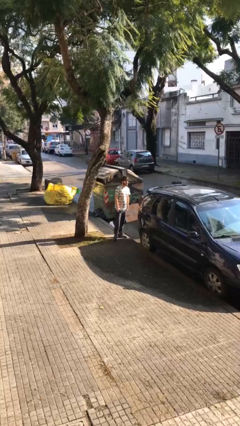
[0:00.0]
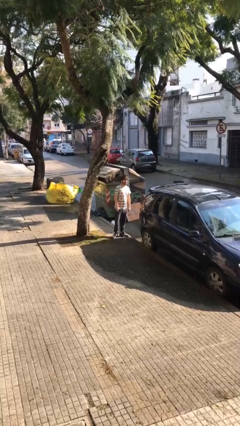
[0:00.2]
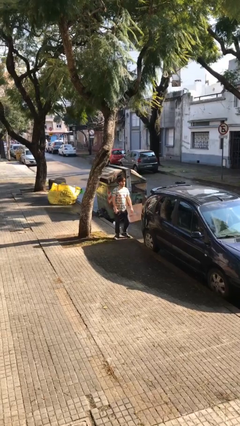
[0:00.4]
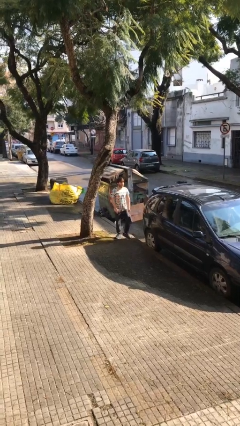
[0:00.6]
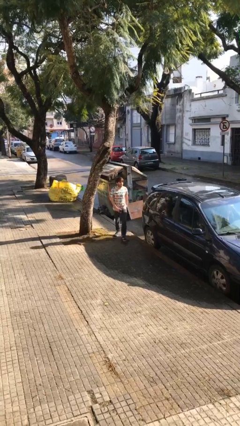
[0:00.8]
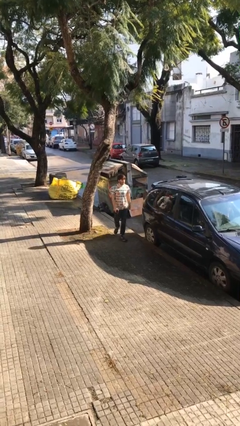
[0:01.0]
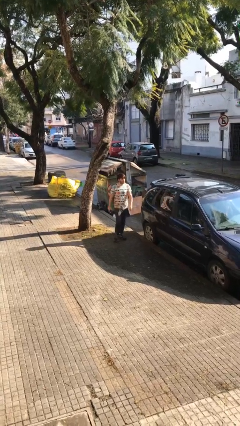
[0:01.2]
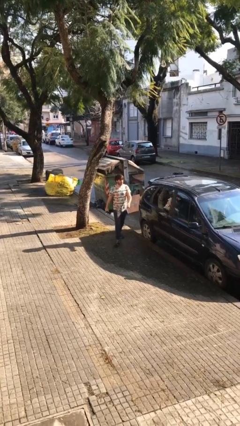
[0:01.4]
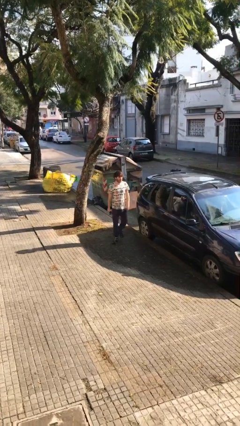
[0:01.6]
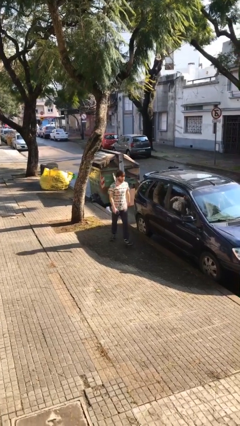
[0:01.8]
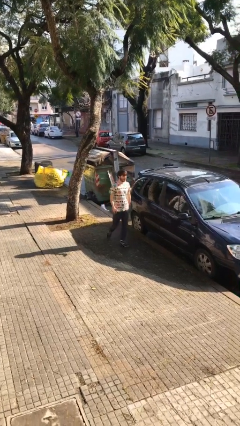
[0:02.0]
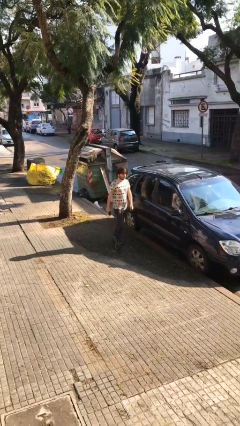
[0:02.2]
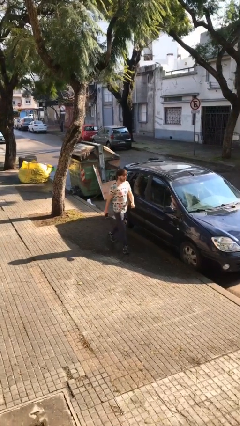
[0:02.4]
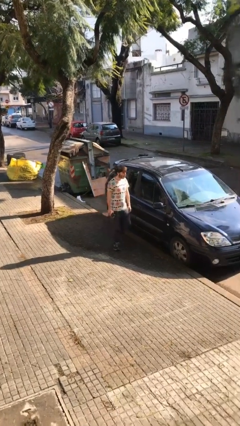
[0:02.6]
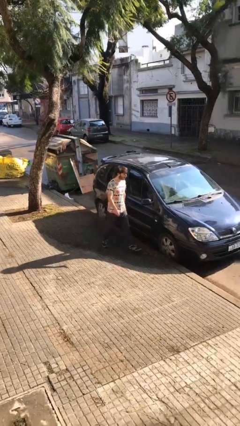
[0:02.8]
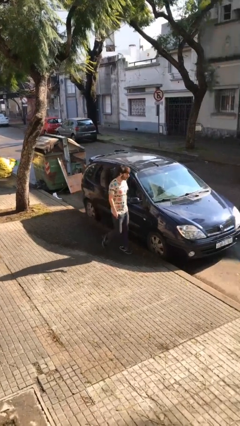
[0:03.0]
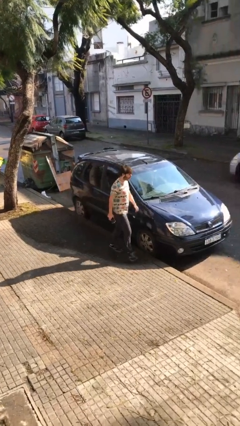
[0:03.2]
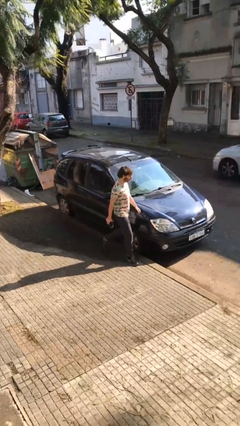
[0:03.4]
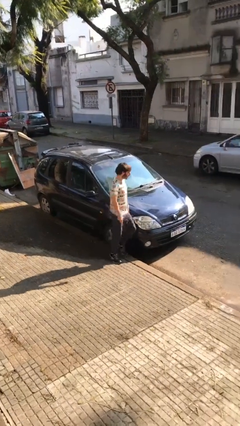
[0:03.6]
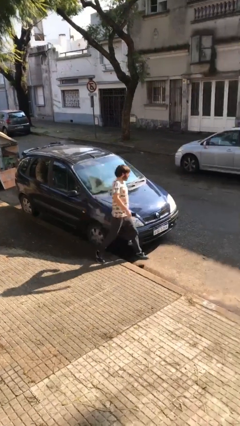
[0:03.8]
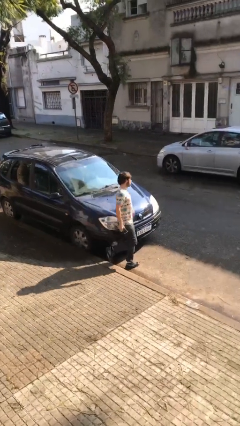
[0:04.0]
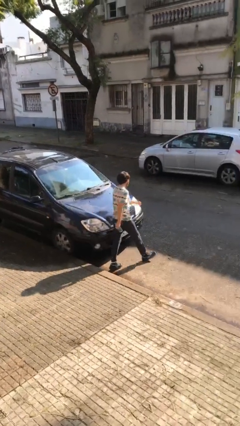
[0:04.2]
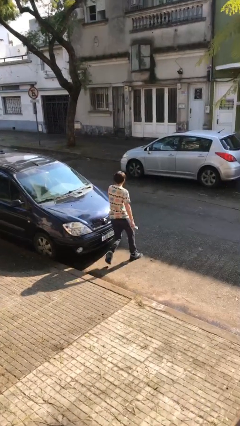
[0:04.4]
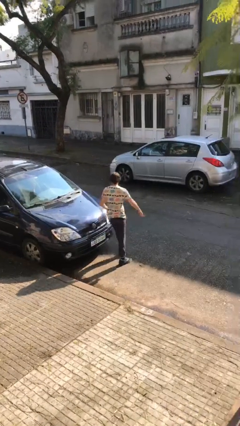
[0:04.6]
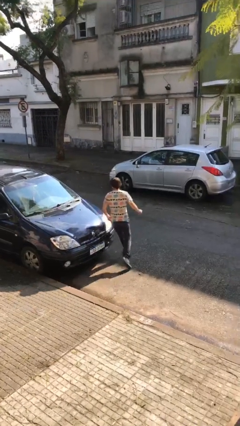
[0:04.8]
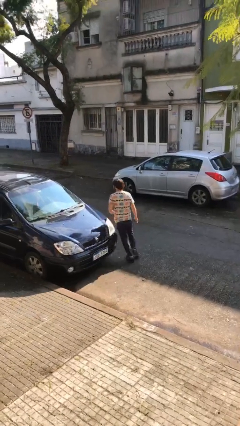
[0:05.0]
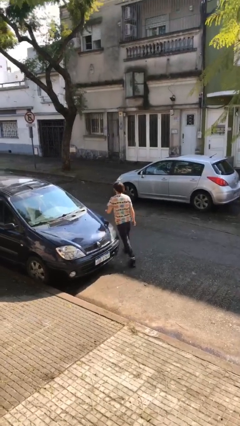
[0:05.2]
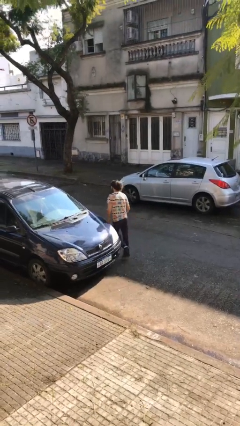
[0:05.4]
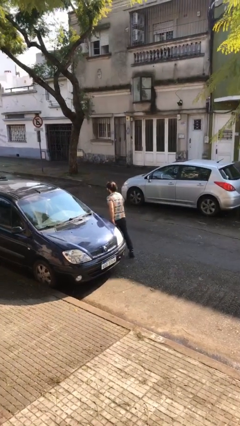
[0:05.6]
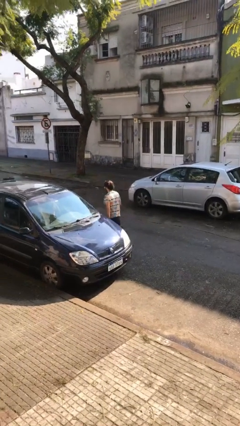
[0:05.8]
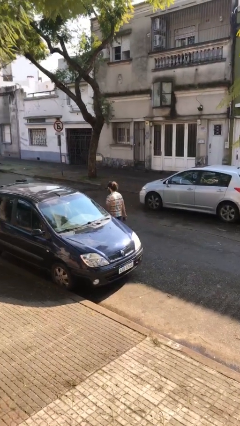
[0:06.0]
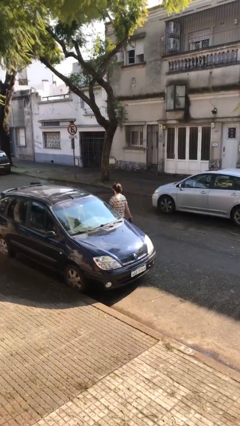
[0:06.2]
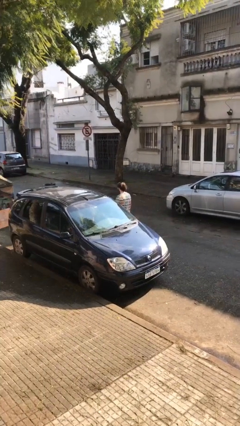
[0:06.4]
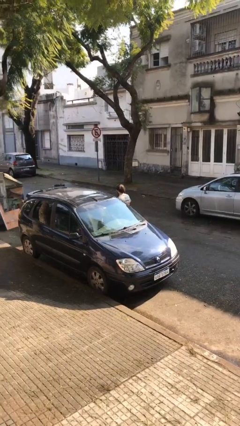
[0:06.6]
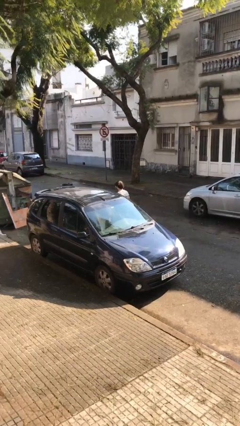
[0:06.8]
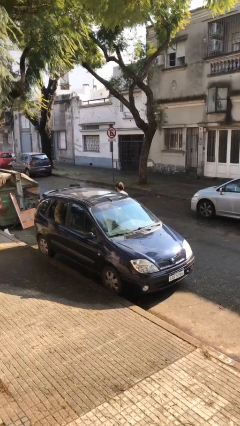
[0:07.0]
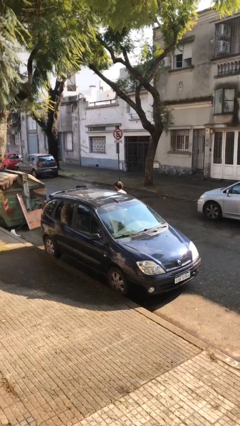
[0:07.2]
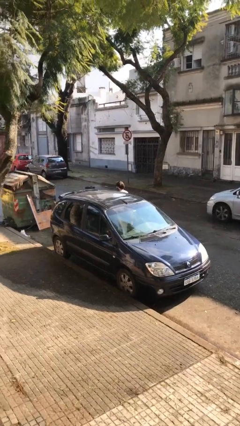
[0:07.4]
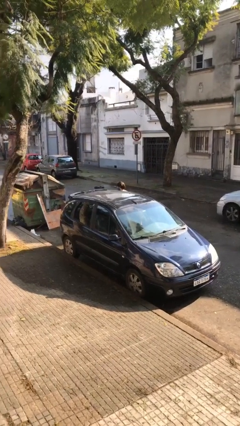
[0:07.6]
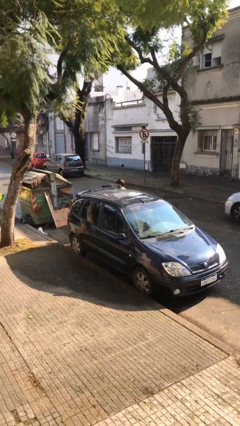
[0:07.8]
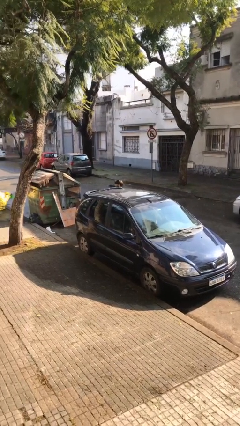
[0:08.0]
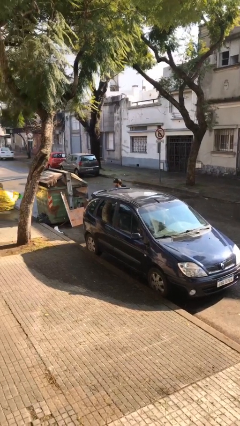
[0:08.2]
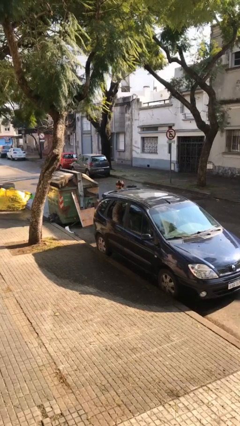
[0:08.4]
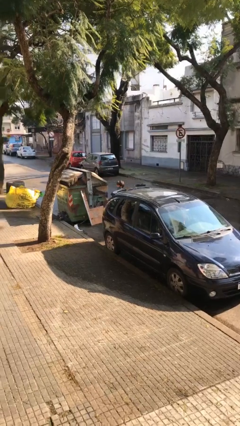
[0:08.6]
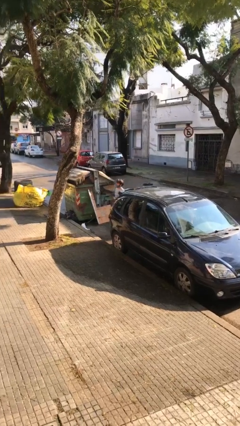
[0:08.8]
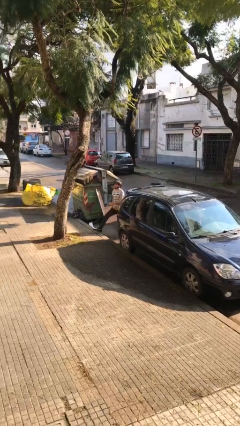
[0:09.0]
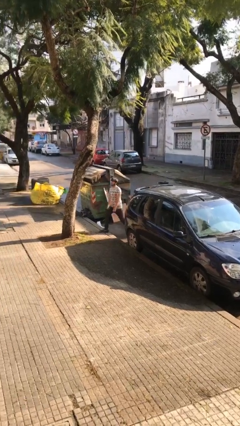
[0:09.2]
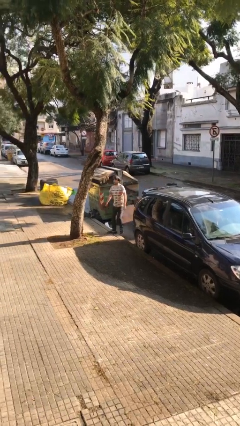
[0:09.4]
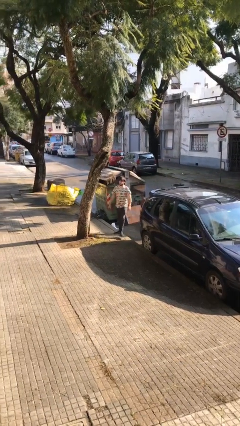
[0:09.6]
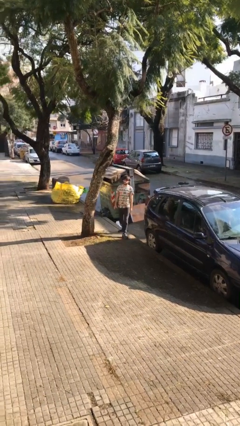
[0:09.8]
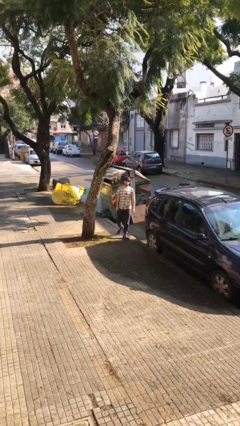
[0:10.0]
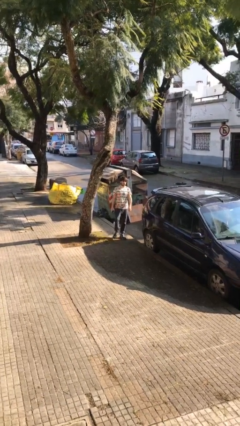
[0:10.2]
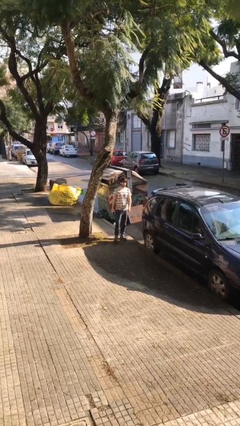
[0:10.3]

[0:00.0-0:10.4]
person walks around car

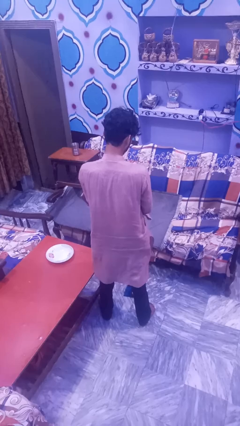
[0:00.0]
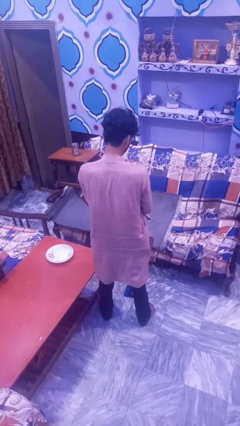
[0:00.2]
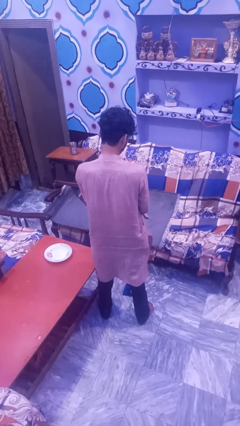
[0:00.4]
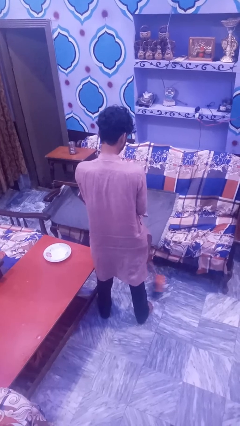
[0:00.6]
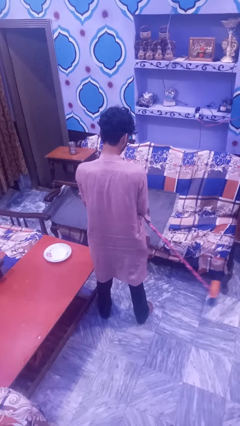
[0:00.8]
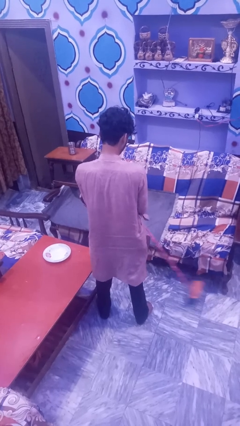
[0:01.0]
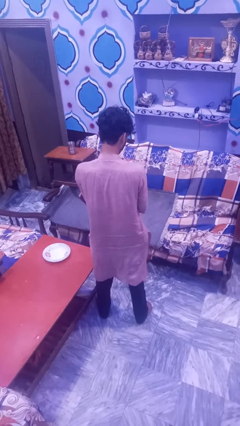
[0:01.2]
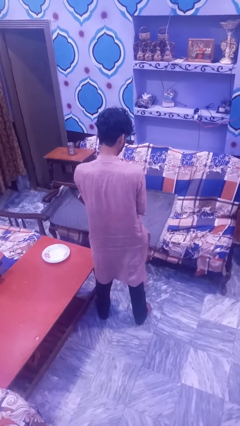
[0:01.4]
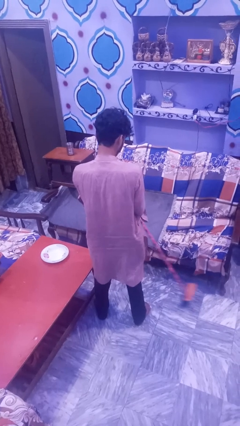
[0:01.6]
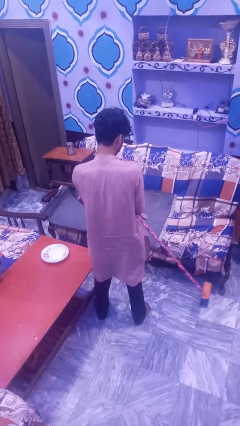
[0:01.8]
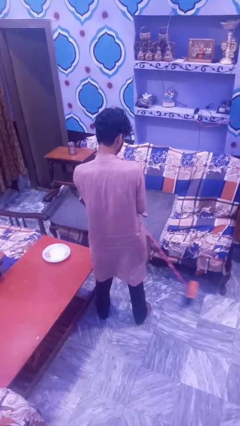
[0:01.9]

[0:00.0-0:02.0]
person mops

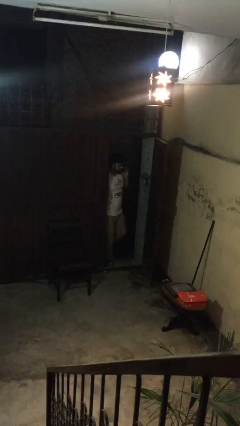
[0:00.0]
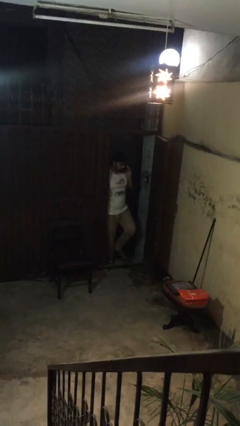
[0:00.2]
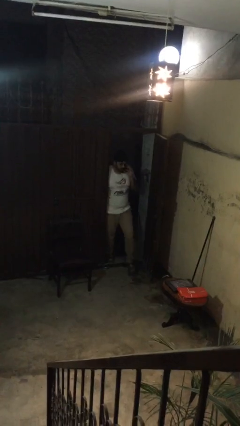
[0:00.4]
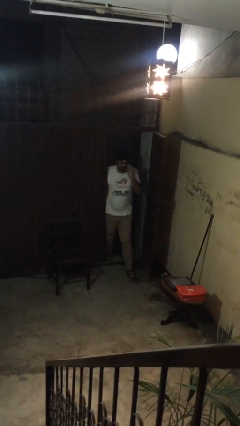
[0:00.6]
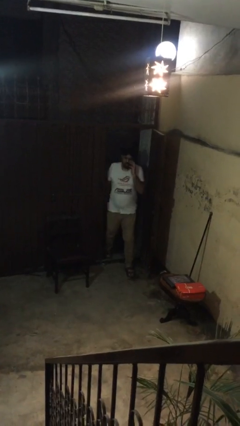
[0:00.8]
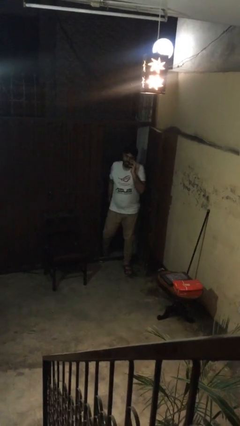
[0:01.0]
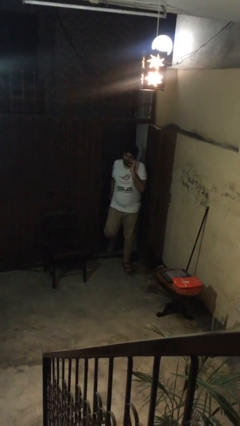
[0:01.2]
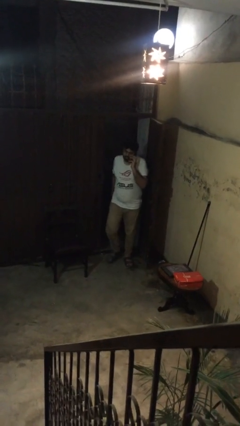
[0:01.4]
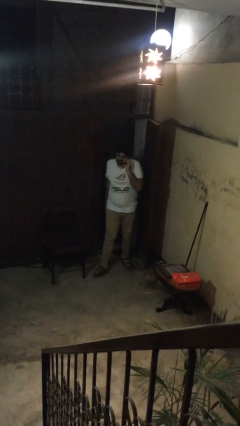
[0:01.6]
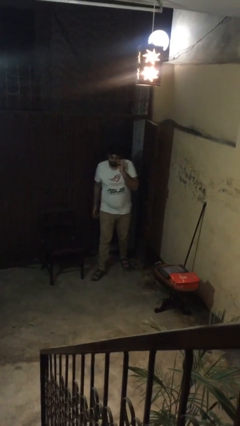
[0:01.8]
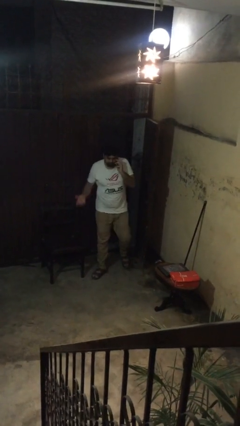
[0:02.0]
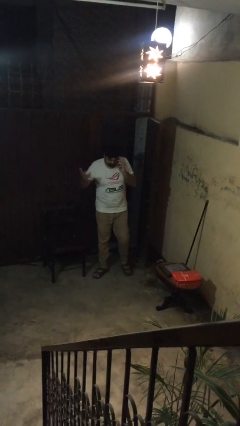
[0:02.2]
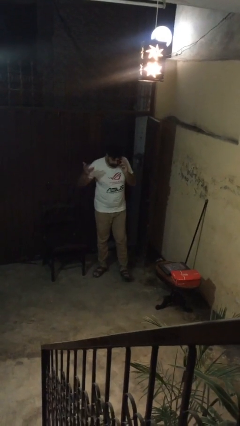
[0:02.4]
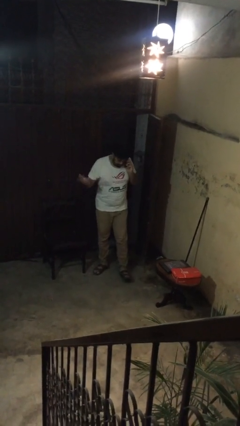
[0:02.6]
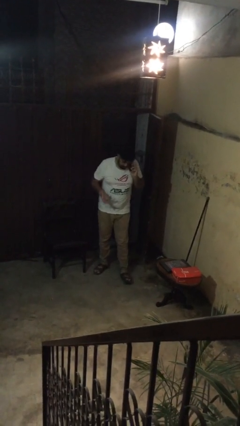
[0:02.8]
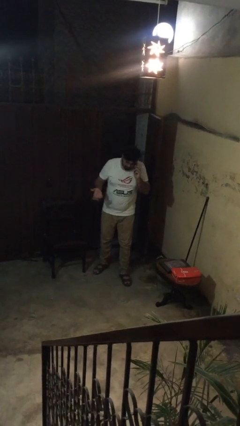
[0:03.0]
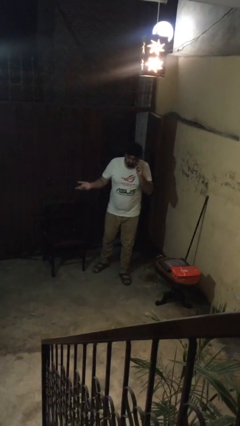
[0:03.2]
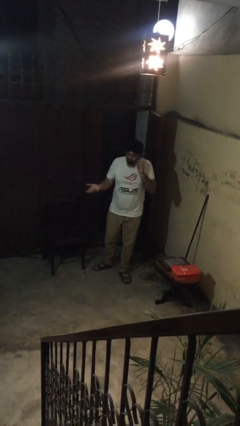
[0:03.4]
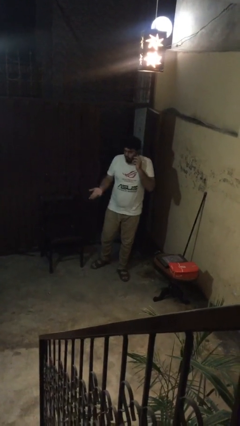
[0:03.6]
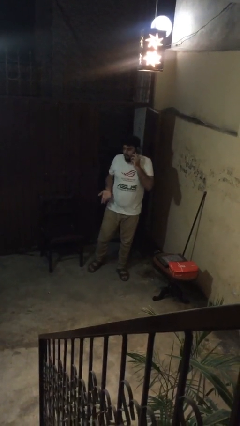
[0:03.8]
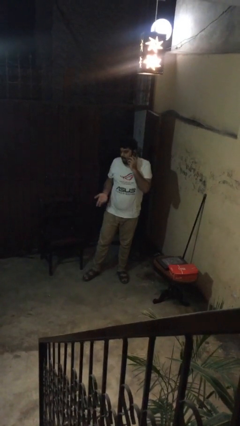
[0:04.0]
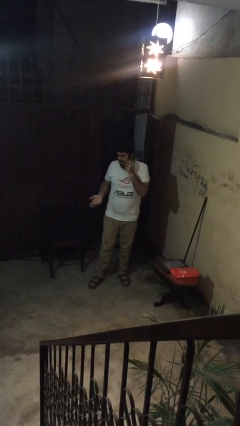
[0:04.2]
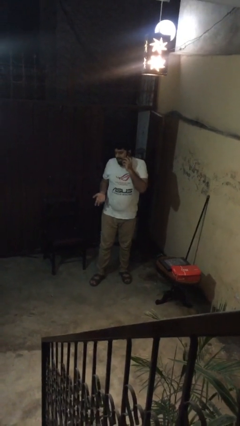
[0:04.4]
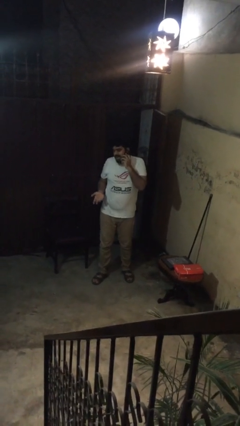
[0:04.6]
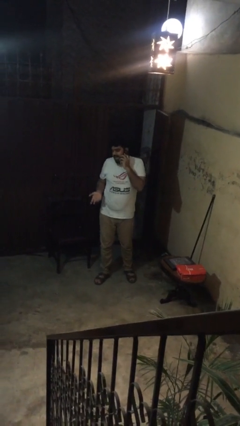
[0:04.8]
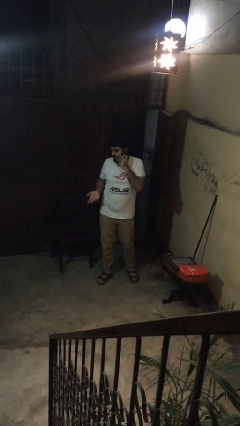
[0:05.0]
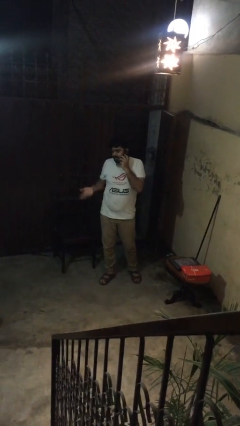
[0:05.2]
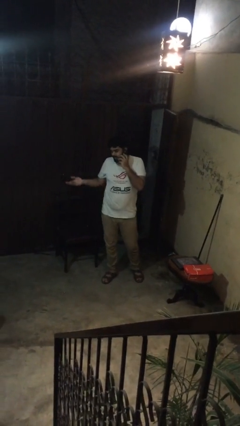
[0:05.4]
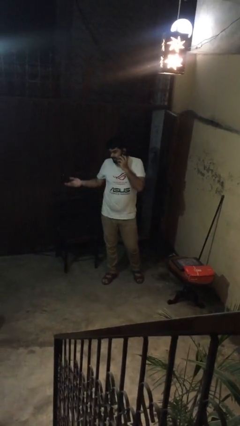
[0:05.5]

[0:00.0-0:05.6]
person enters scene through structure
